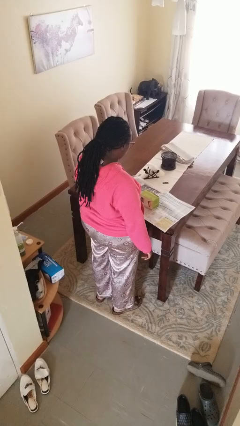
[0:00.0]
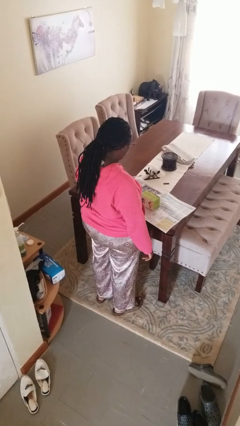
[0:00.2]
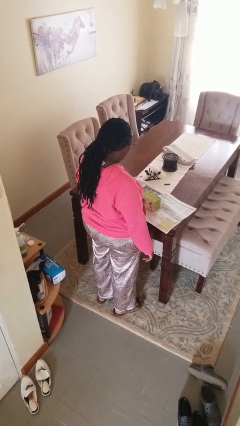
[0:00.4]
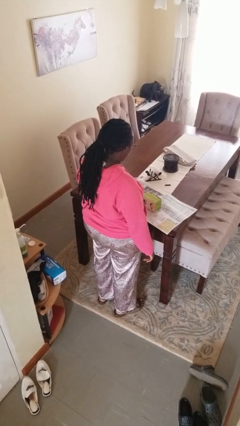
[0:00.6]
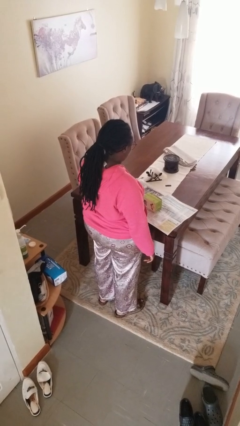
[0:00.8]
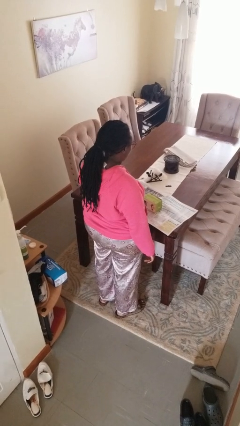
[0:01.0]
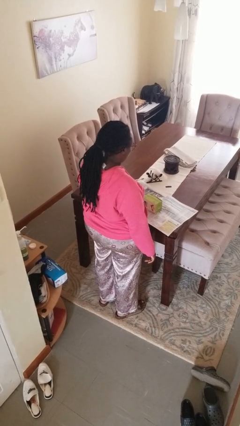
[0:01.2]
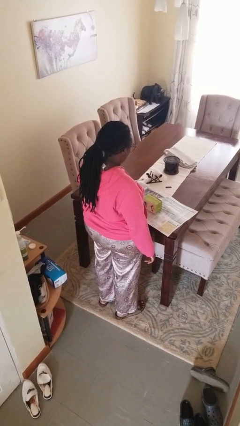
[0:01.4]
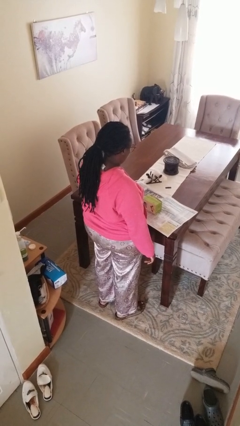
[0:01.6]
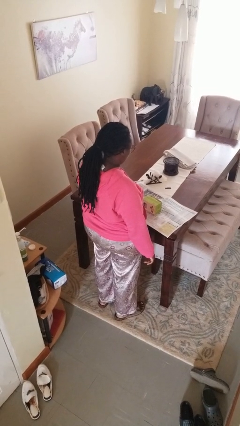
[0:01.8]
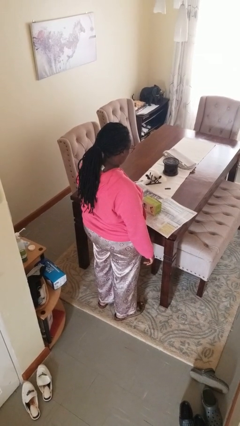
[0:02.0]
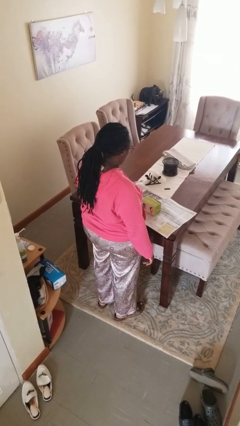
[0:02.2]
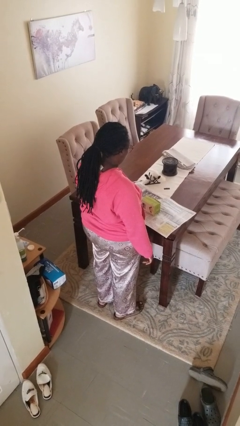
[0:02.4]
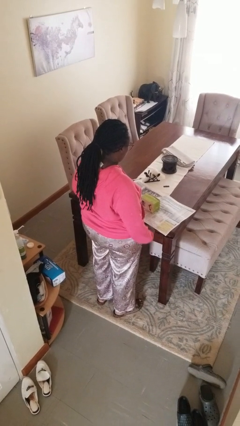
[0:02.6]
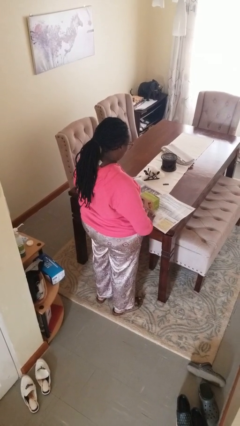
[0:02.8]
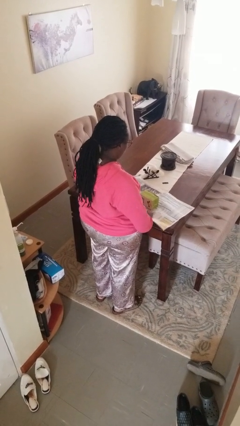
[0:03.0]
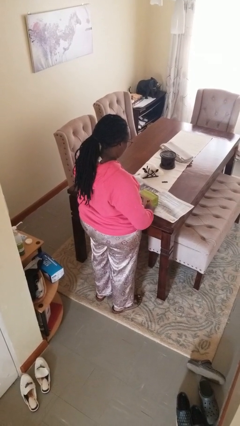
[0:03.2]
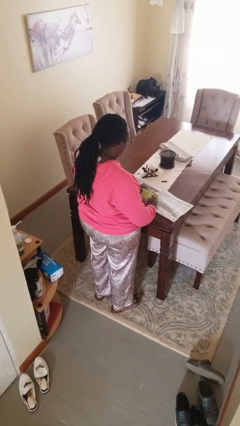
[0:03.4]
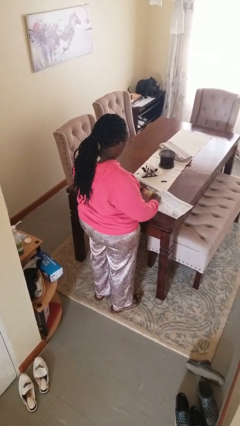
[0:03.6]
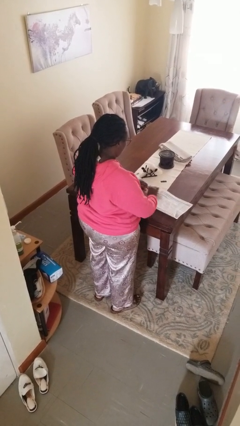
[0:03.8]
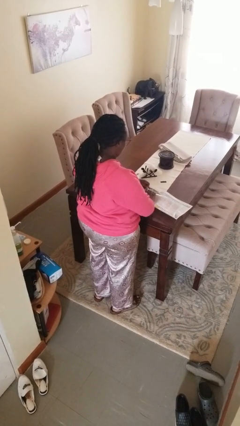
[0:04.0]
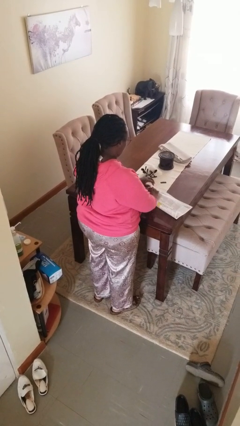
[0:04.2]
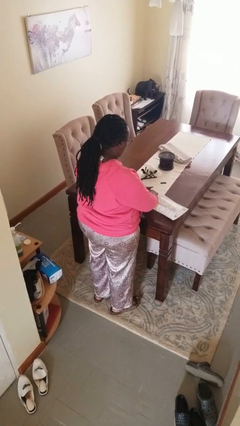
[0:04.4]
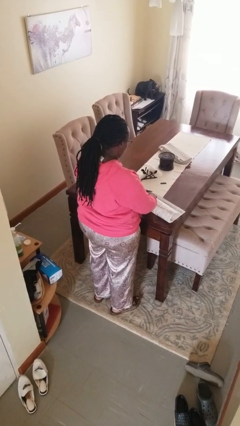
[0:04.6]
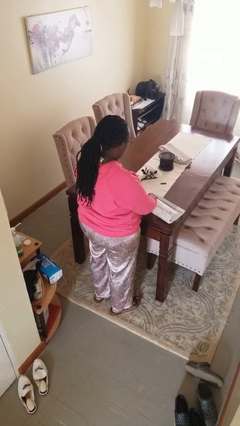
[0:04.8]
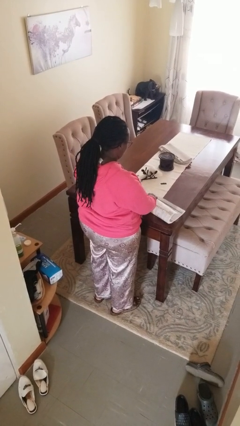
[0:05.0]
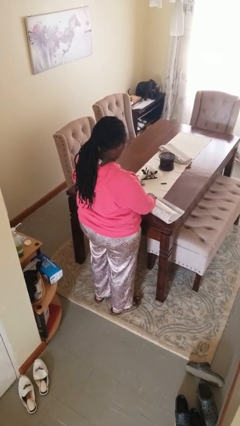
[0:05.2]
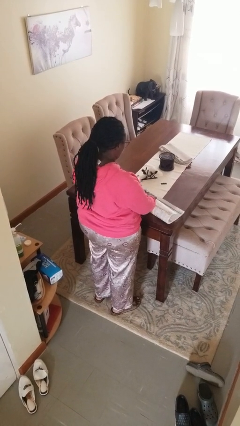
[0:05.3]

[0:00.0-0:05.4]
person wraps box

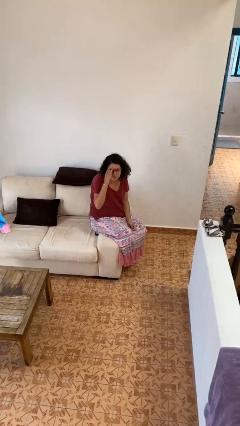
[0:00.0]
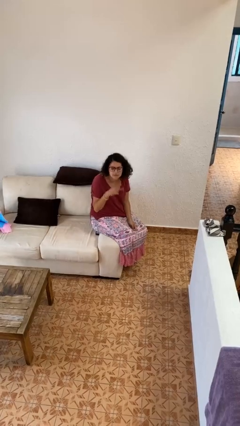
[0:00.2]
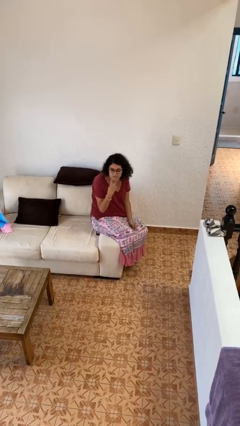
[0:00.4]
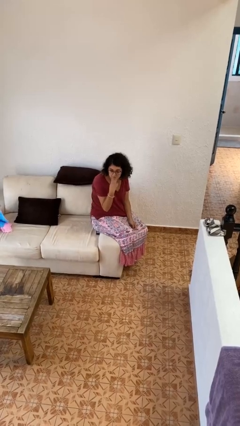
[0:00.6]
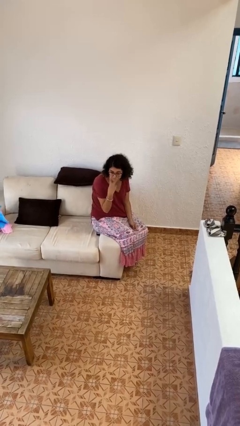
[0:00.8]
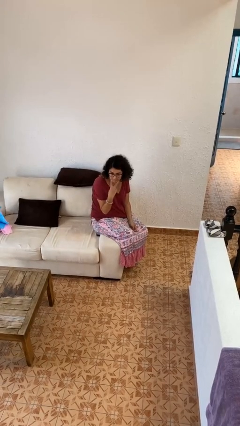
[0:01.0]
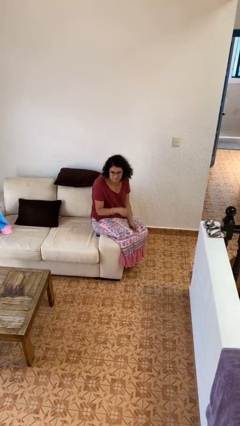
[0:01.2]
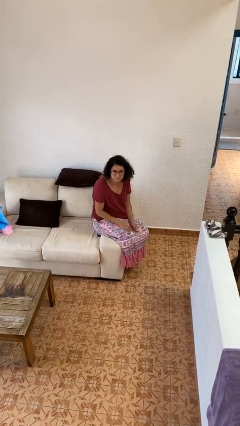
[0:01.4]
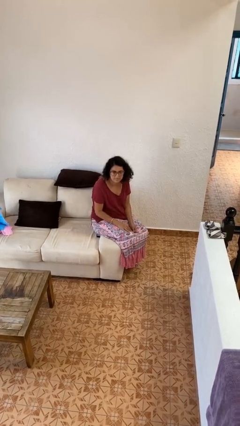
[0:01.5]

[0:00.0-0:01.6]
person gestures watch closely

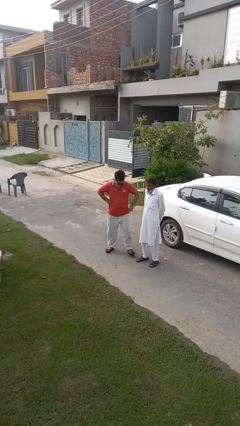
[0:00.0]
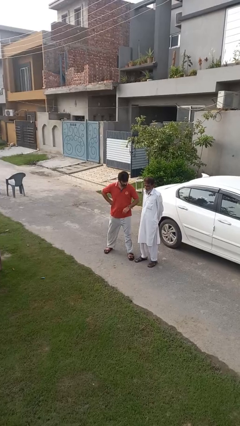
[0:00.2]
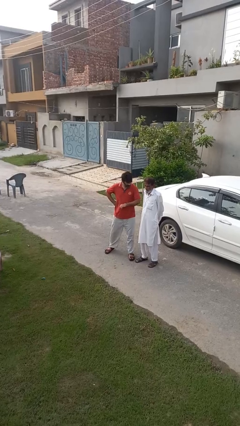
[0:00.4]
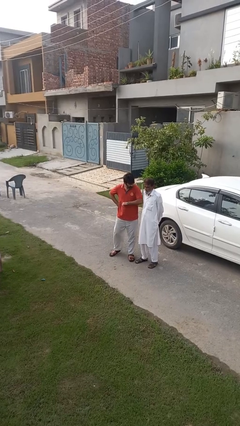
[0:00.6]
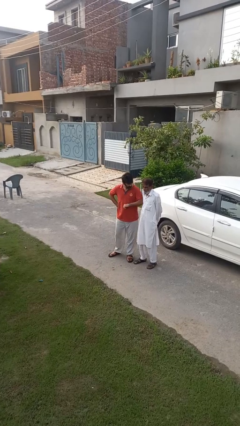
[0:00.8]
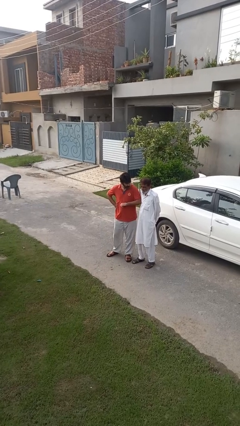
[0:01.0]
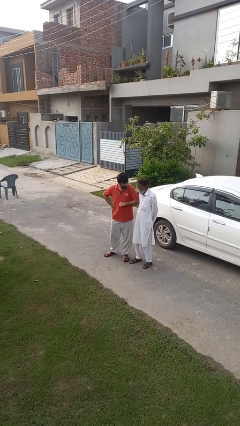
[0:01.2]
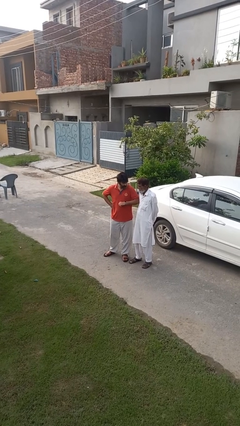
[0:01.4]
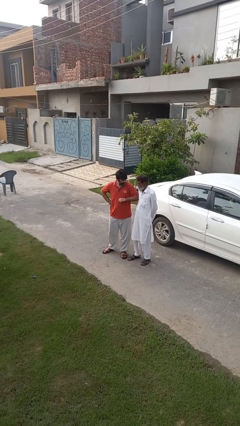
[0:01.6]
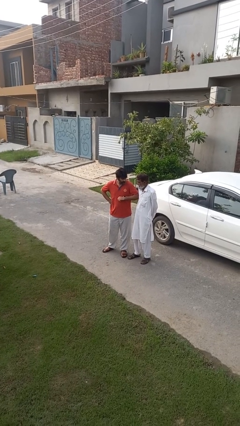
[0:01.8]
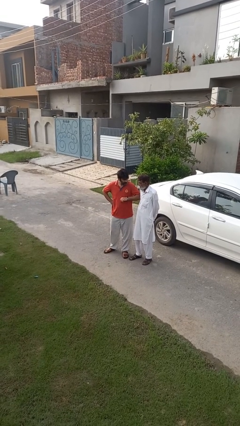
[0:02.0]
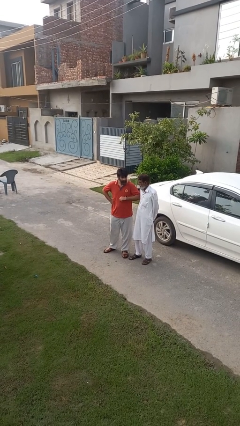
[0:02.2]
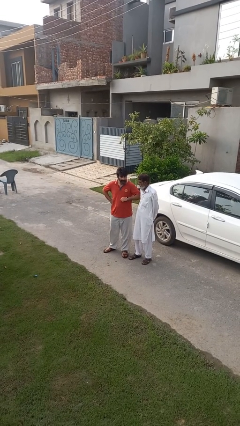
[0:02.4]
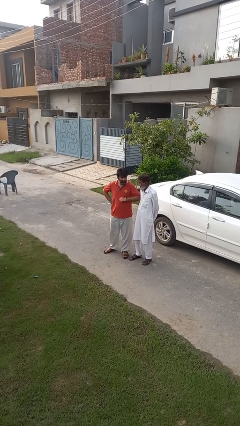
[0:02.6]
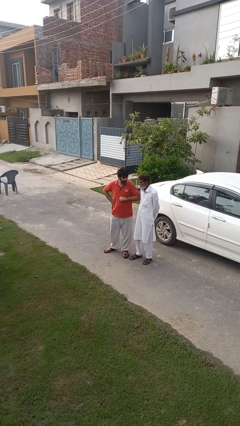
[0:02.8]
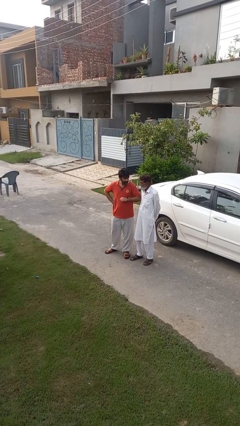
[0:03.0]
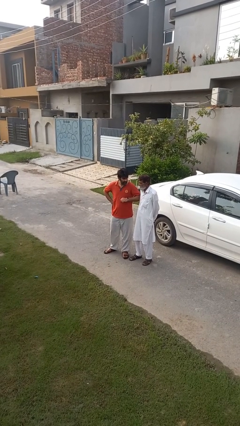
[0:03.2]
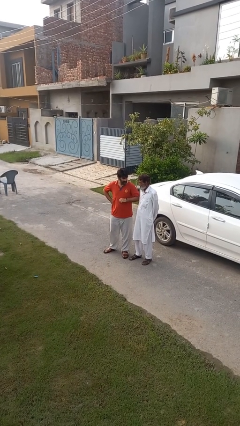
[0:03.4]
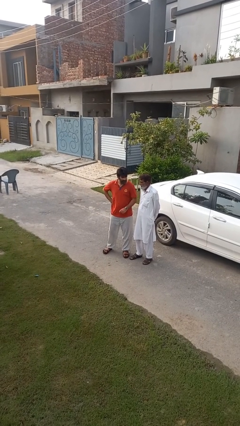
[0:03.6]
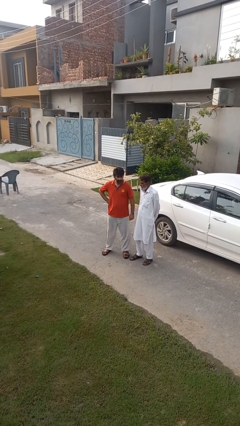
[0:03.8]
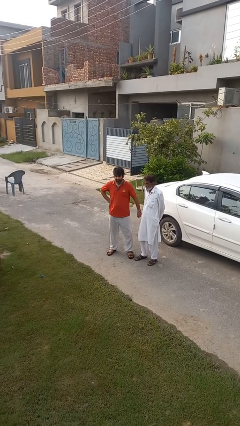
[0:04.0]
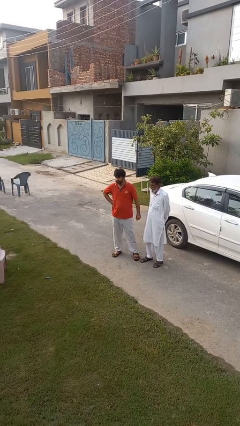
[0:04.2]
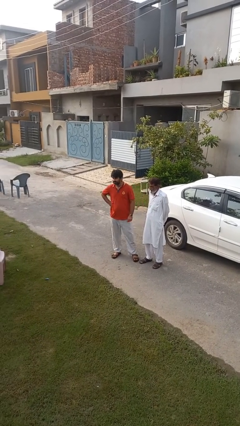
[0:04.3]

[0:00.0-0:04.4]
person nudges person with elbow

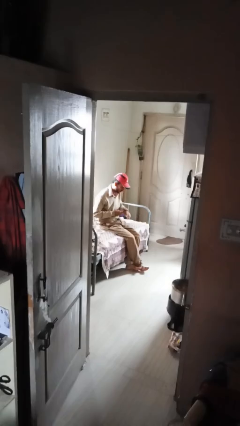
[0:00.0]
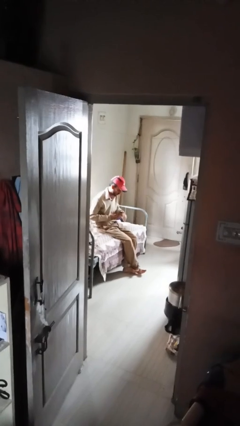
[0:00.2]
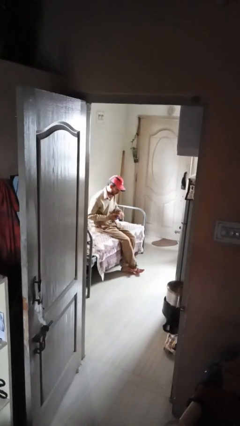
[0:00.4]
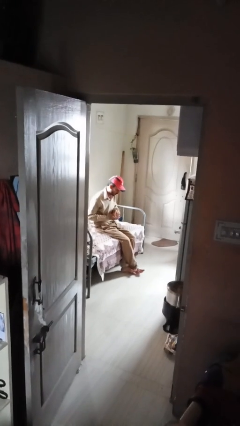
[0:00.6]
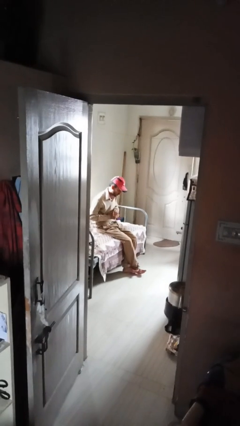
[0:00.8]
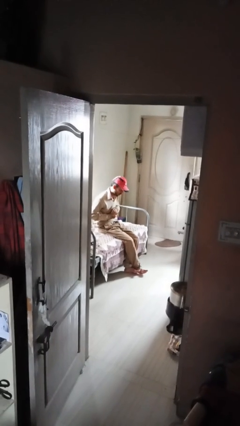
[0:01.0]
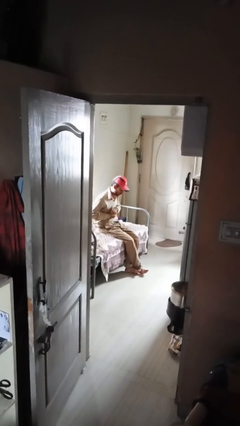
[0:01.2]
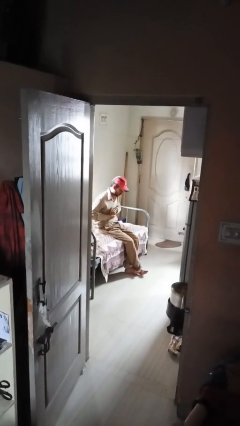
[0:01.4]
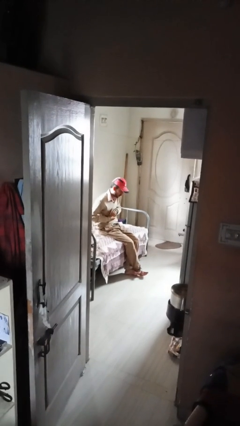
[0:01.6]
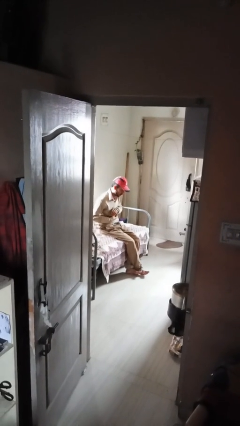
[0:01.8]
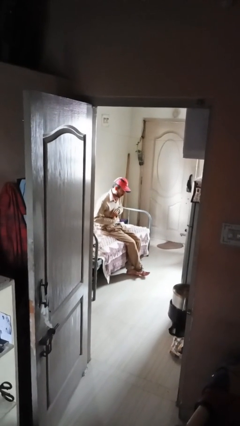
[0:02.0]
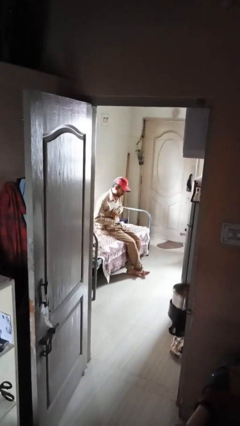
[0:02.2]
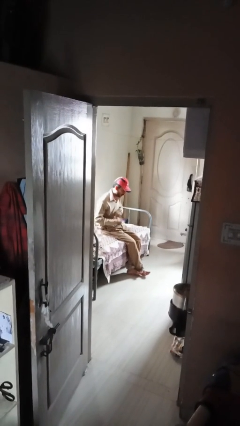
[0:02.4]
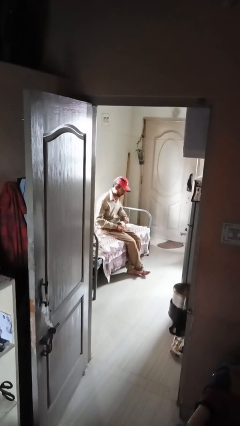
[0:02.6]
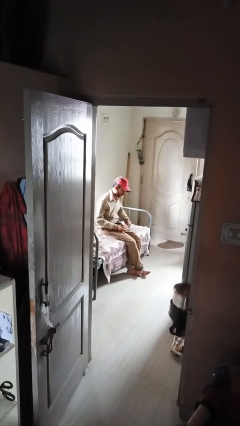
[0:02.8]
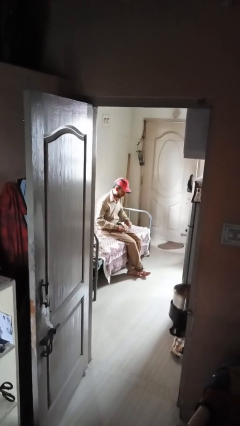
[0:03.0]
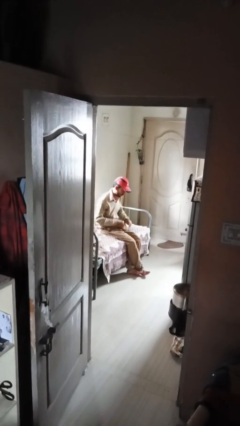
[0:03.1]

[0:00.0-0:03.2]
person puts on wristwatch

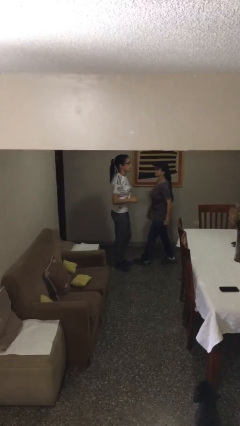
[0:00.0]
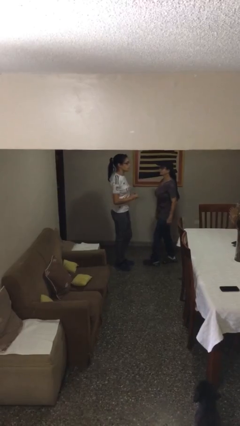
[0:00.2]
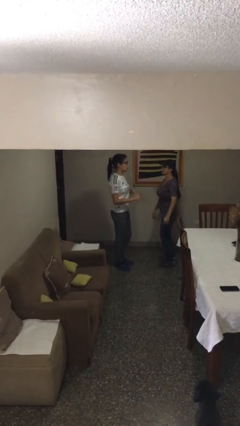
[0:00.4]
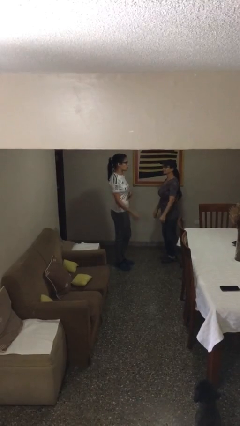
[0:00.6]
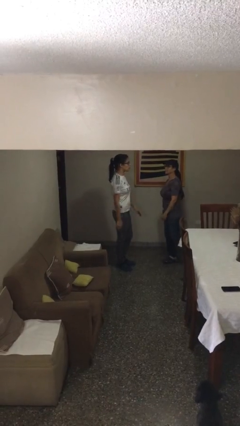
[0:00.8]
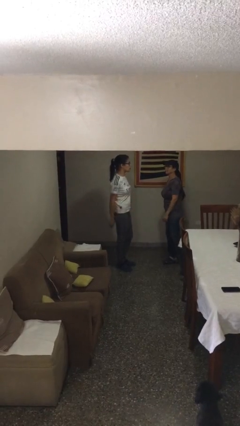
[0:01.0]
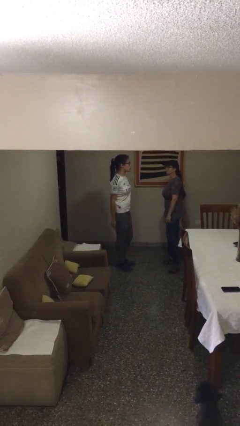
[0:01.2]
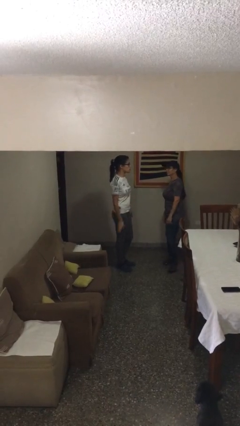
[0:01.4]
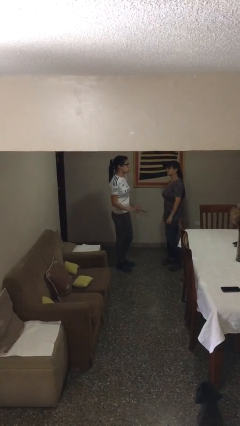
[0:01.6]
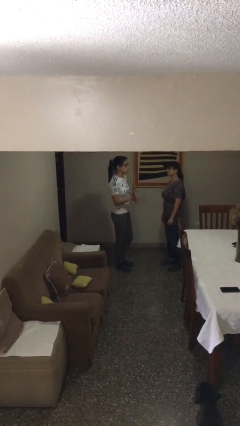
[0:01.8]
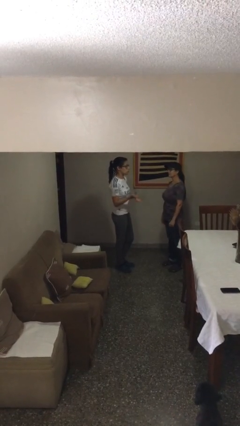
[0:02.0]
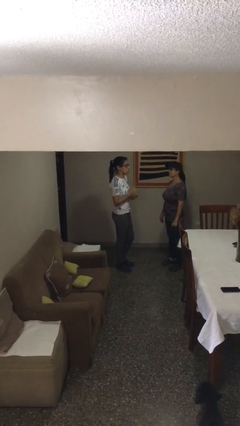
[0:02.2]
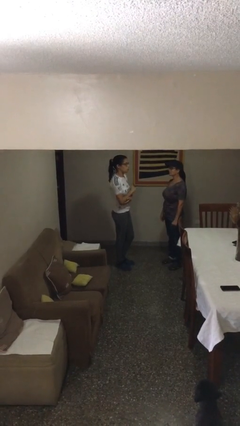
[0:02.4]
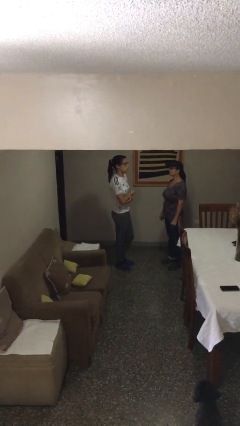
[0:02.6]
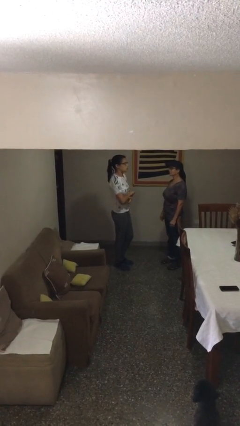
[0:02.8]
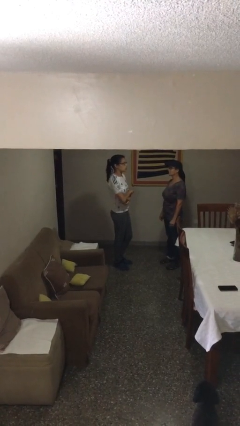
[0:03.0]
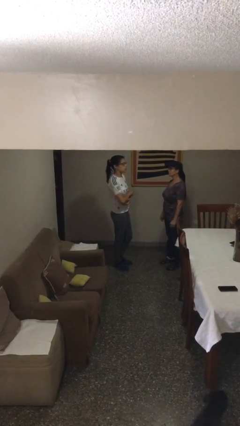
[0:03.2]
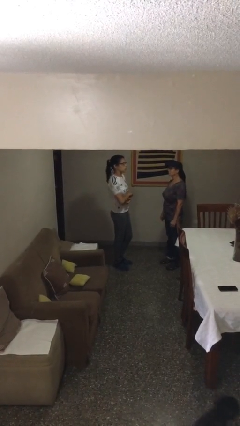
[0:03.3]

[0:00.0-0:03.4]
person talks to person
